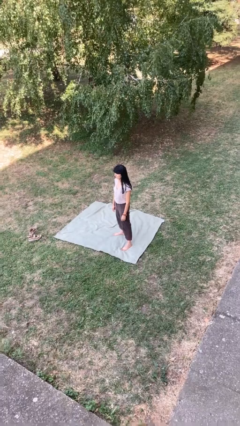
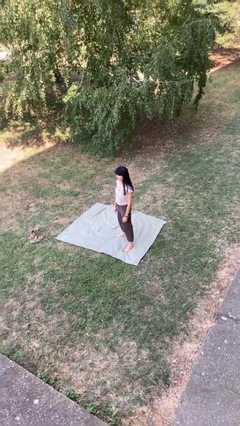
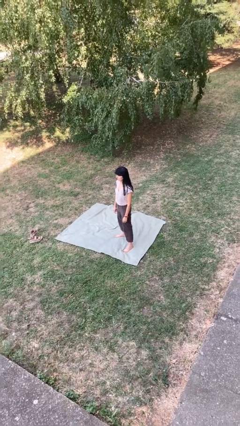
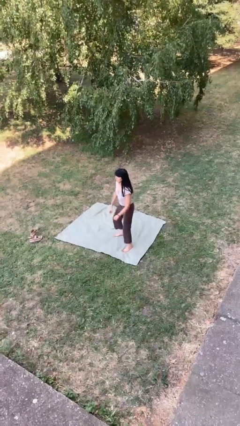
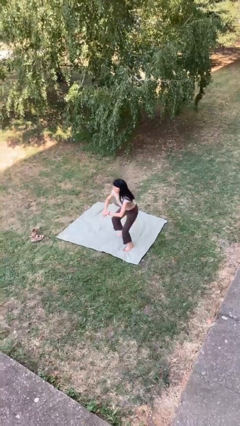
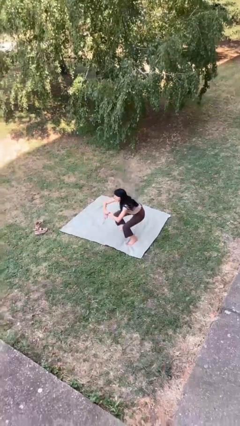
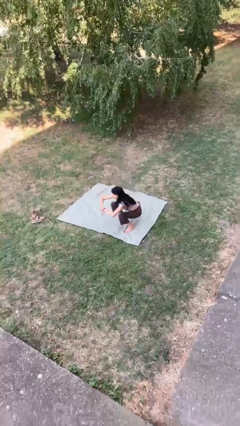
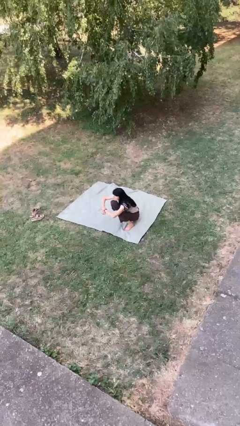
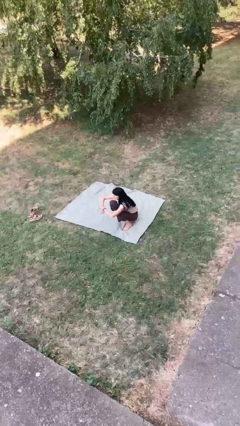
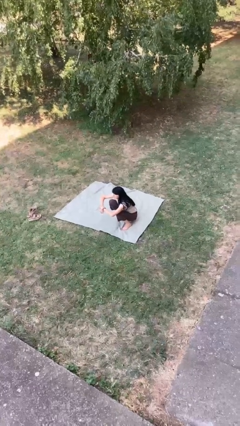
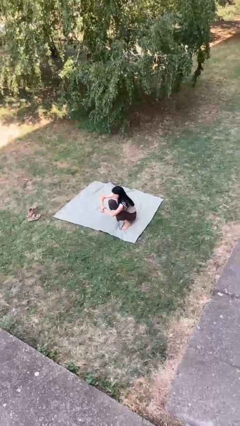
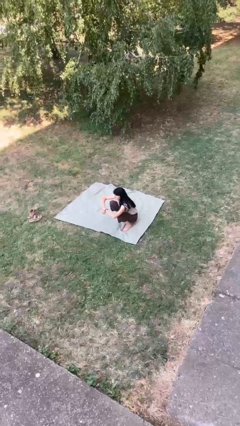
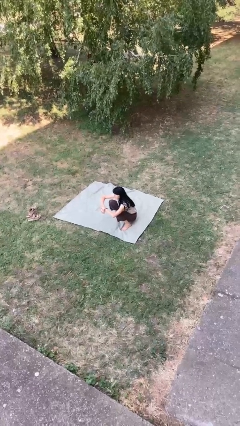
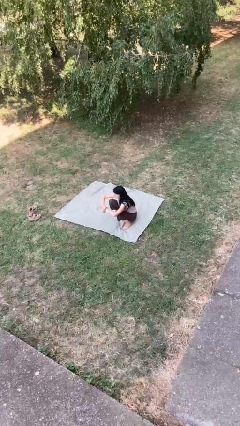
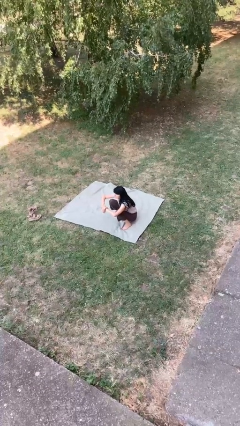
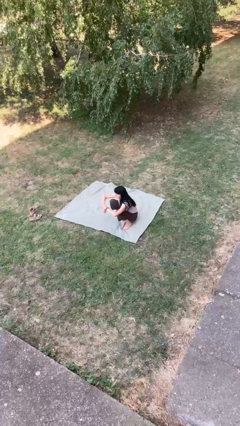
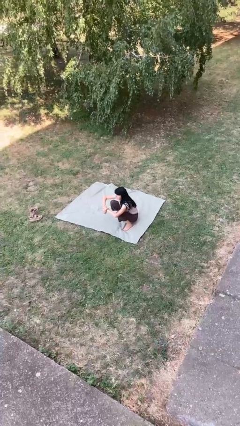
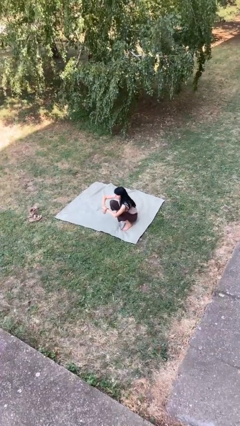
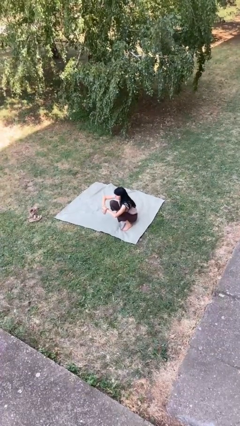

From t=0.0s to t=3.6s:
person squats

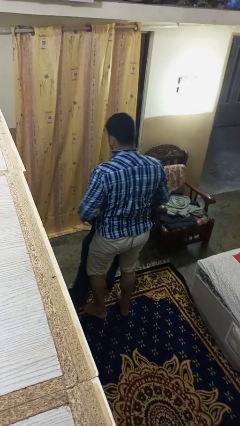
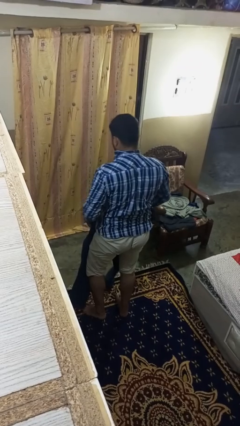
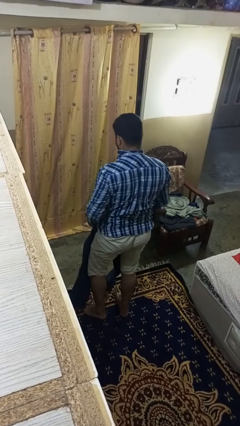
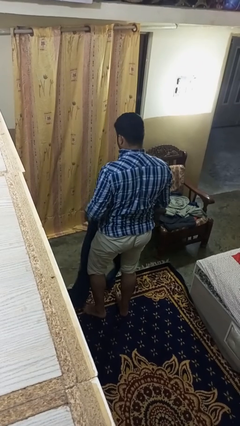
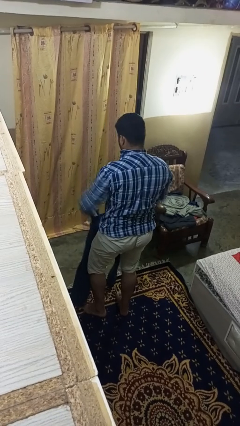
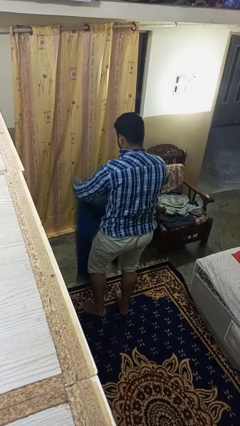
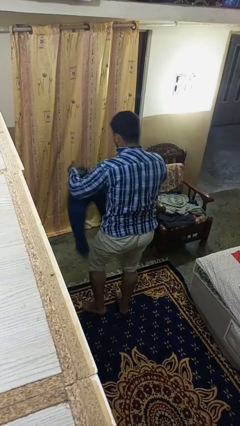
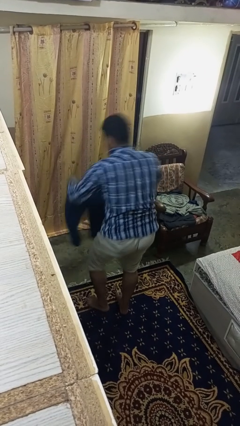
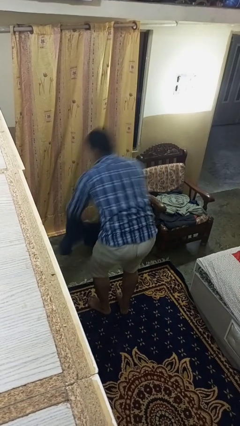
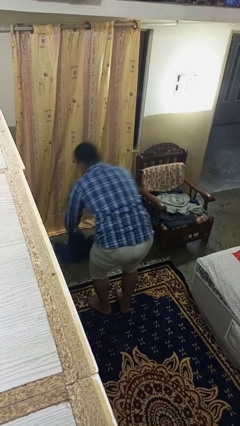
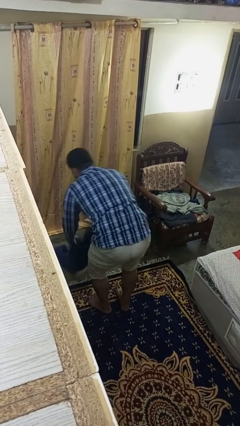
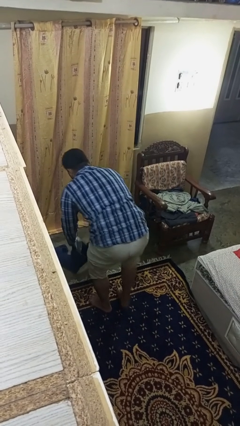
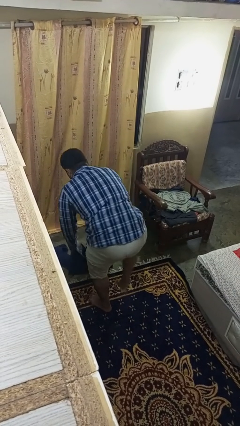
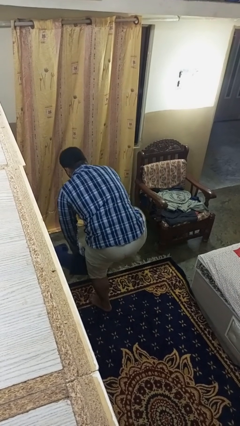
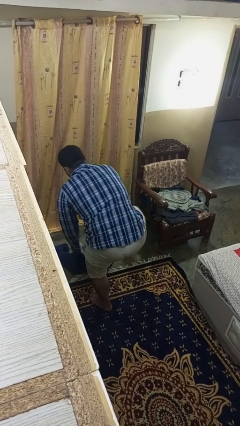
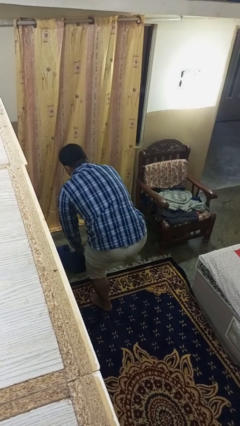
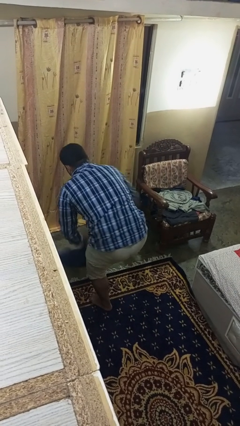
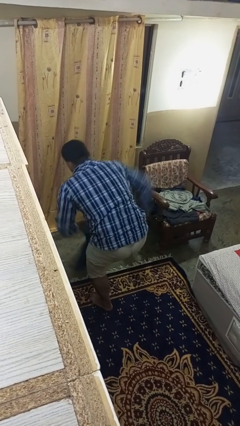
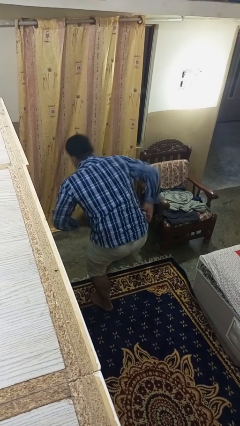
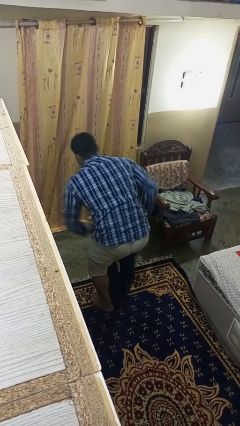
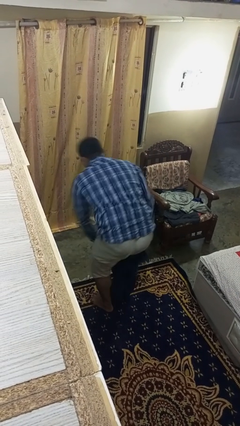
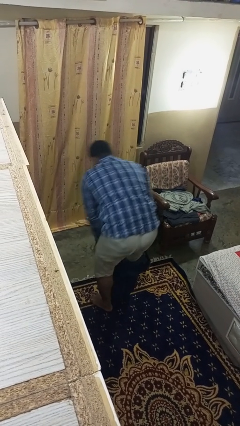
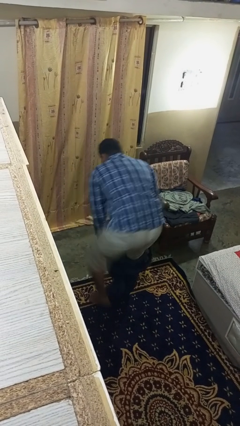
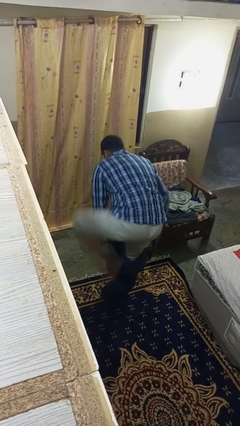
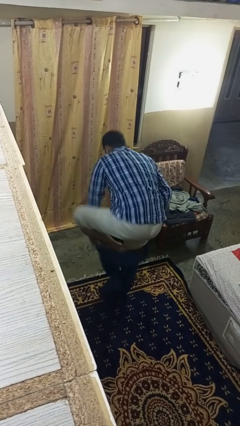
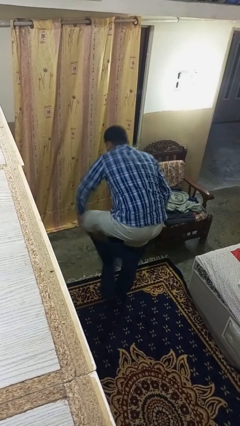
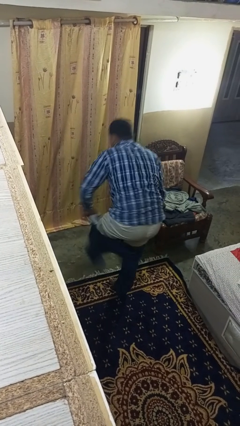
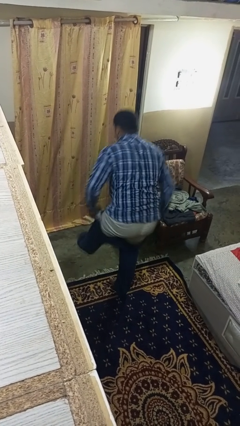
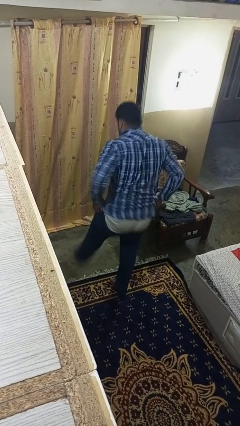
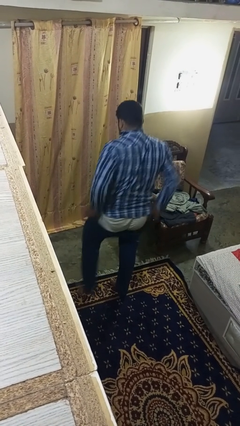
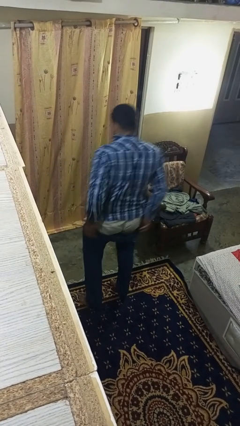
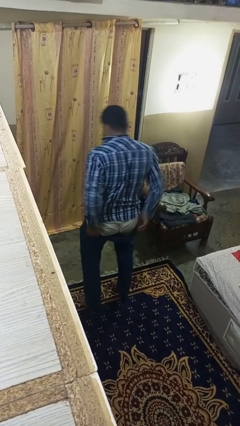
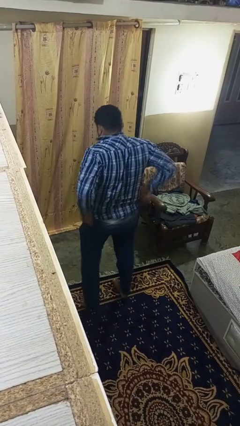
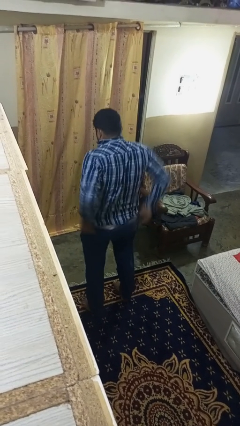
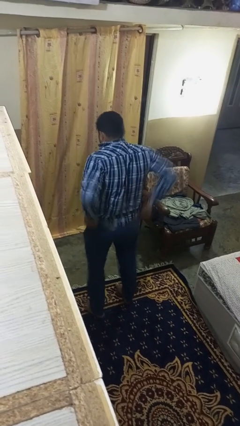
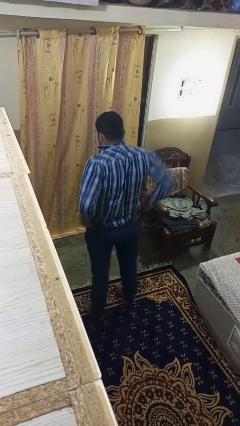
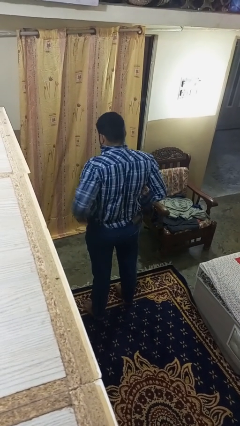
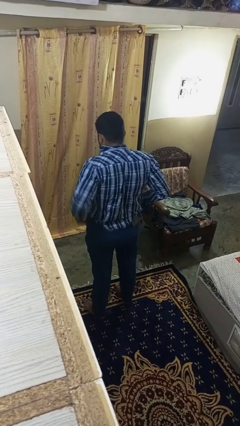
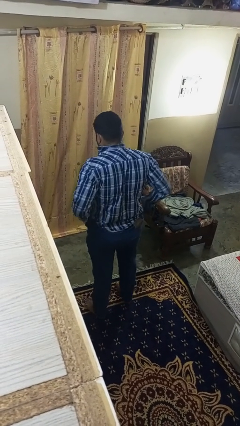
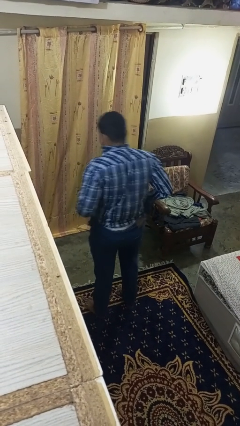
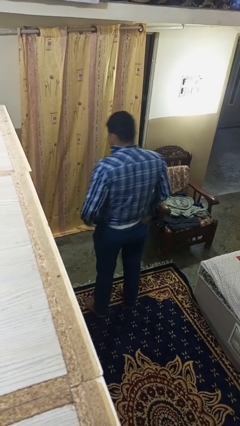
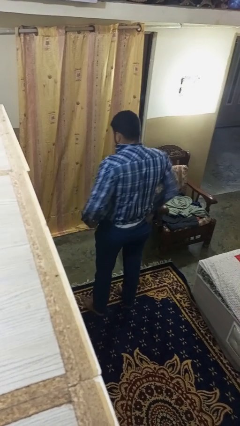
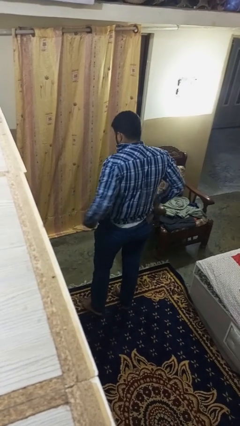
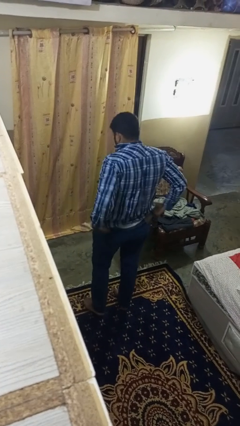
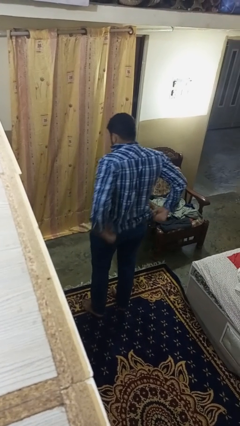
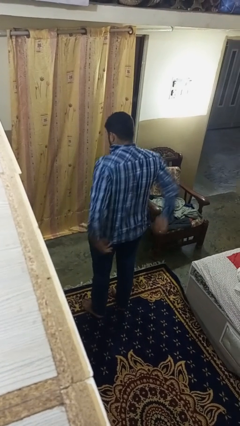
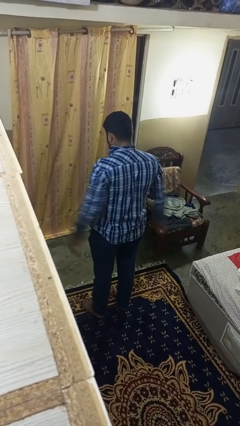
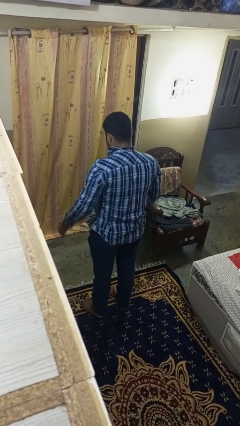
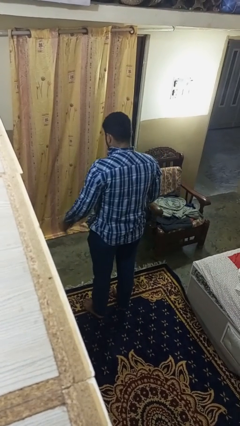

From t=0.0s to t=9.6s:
person puts on pants

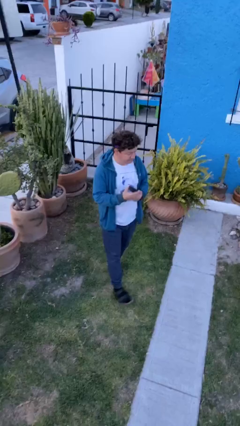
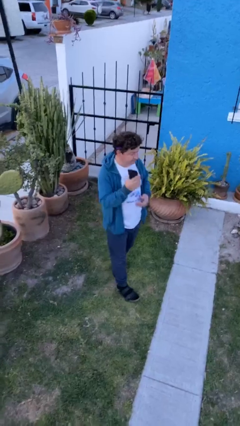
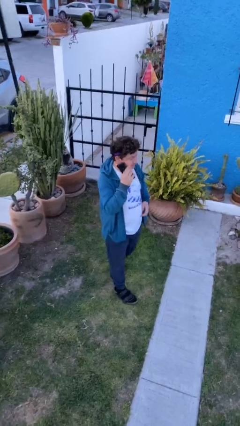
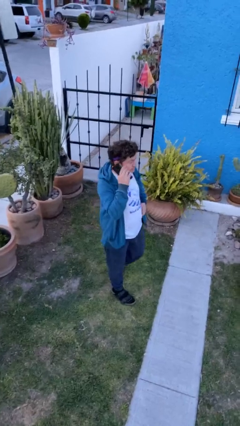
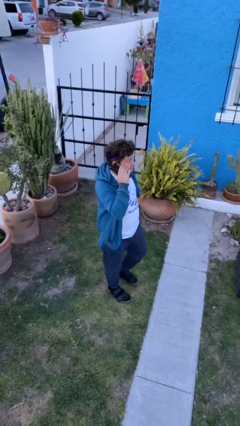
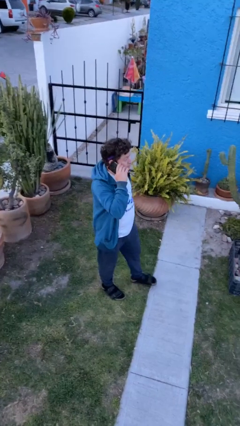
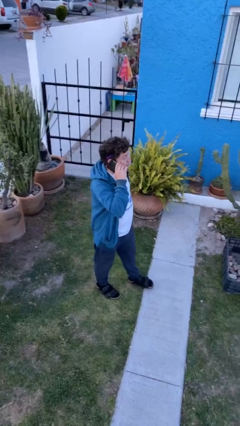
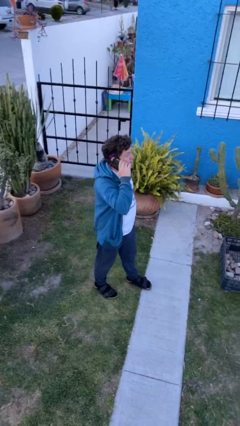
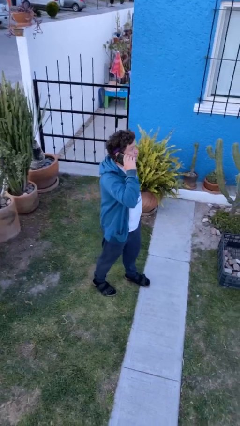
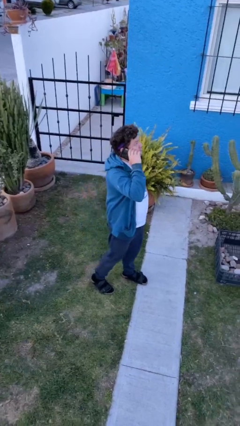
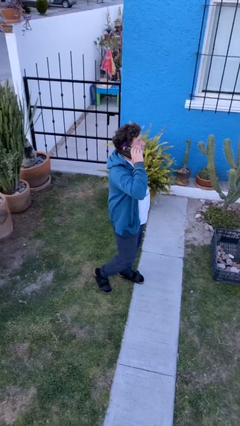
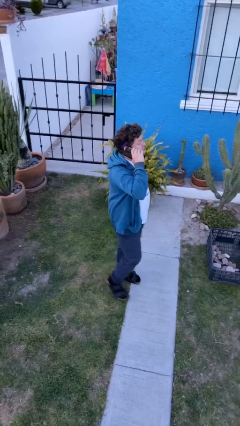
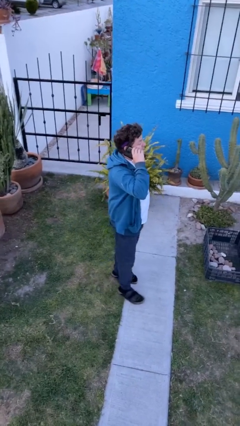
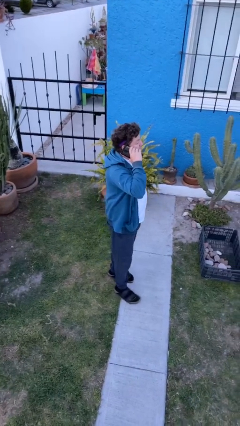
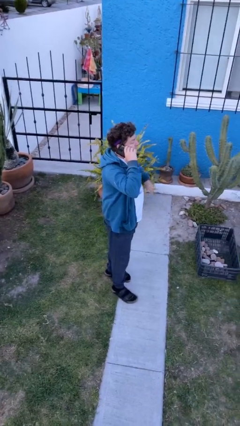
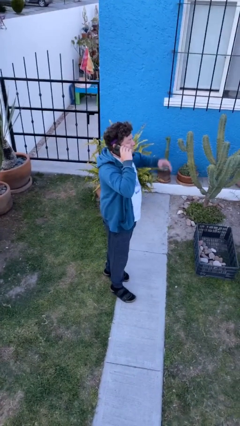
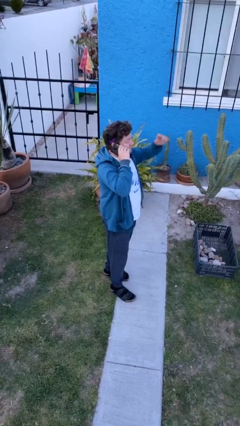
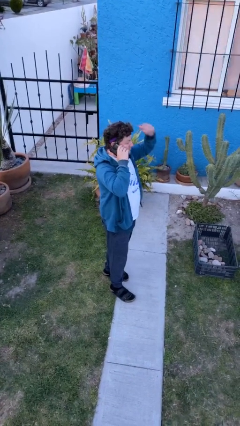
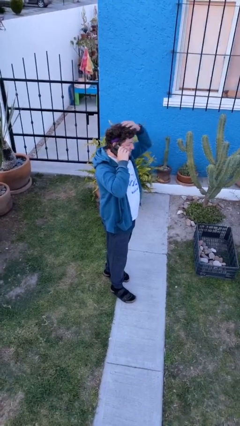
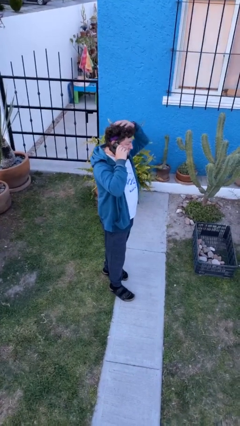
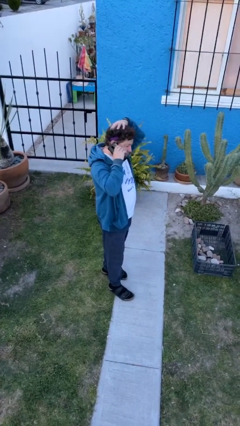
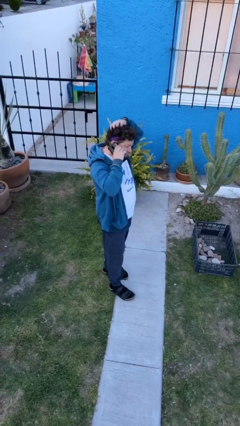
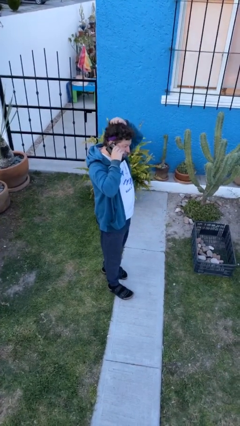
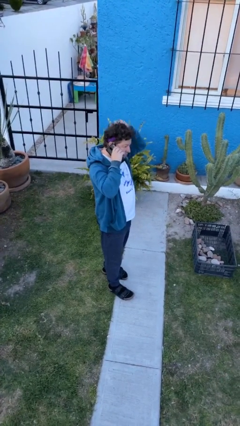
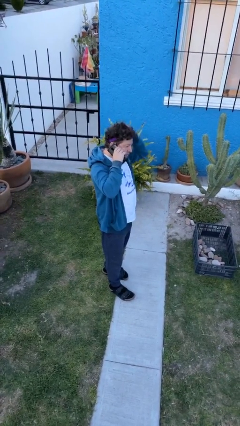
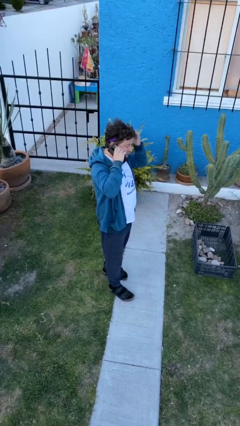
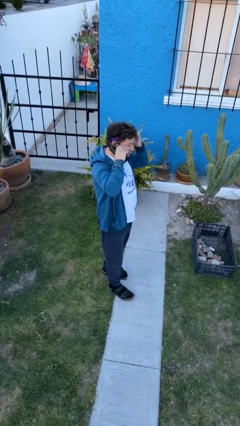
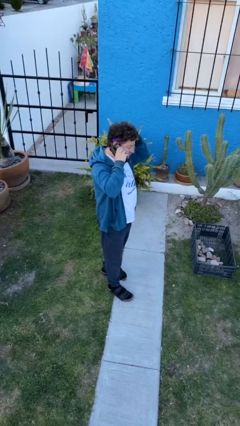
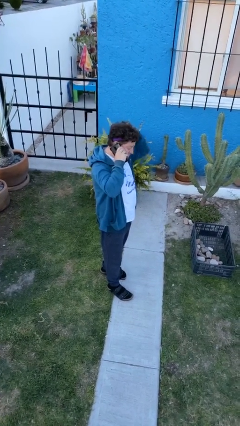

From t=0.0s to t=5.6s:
person talks on phone
